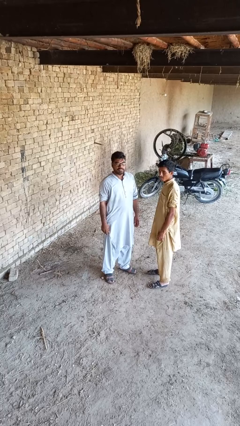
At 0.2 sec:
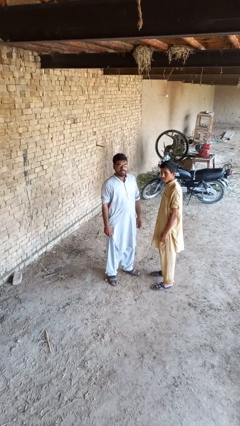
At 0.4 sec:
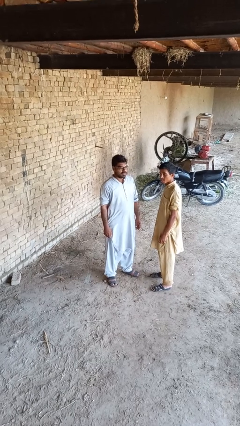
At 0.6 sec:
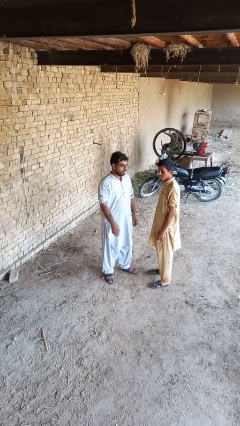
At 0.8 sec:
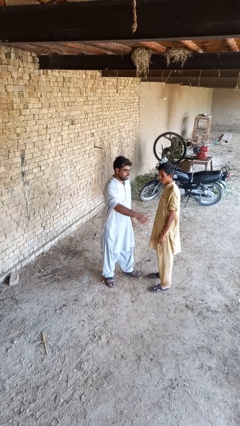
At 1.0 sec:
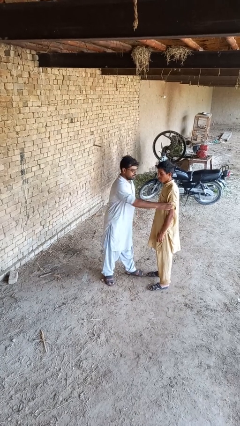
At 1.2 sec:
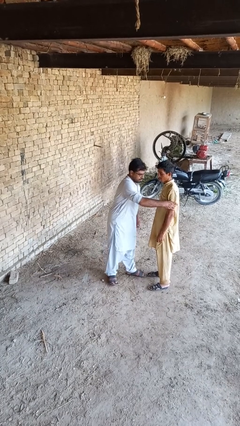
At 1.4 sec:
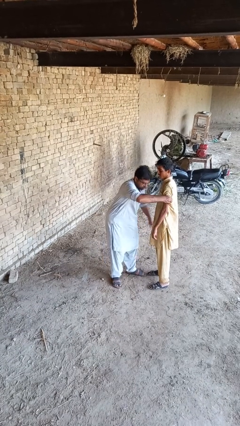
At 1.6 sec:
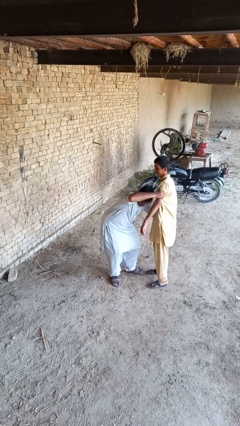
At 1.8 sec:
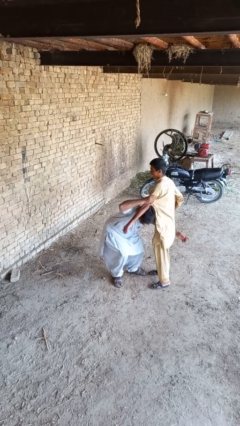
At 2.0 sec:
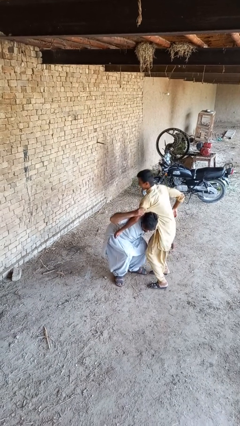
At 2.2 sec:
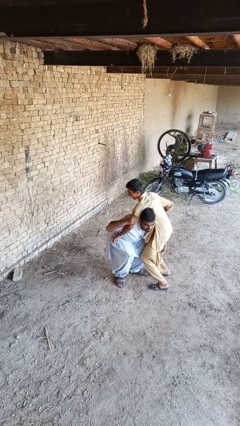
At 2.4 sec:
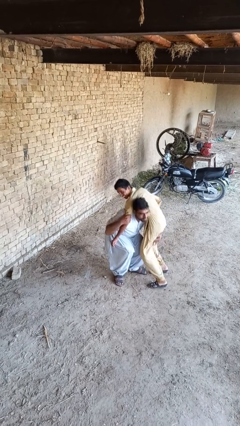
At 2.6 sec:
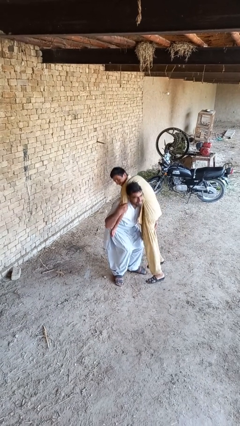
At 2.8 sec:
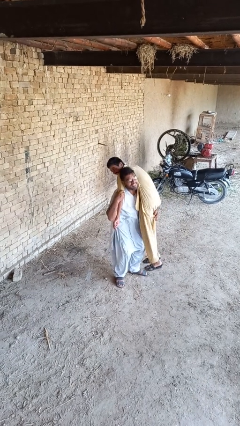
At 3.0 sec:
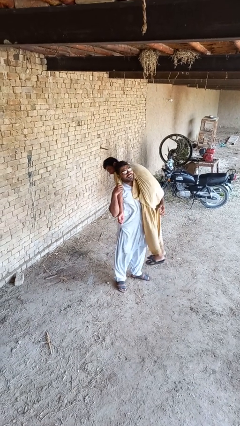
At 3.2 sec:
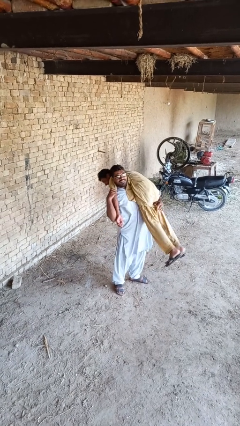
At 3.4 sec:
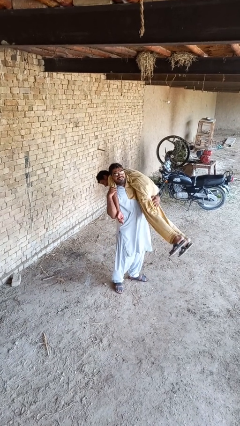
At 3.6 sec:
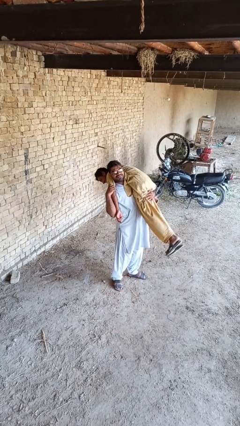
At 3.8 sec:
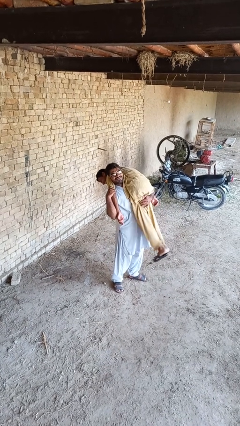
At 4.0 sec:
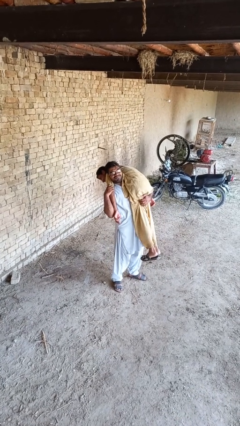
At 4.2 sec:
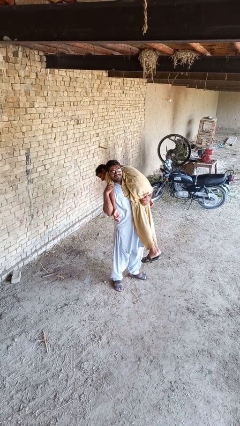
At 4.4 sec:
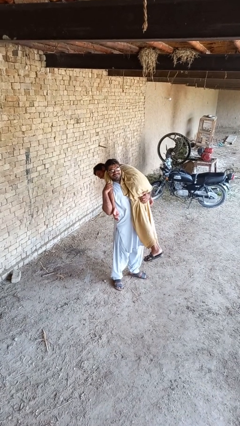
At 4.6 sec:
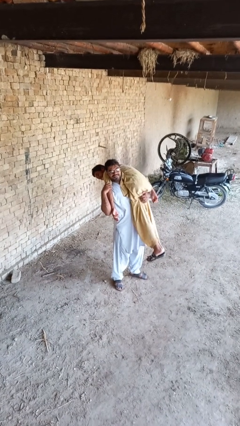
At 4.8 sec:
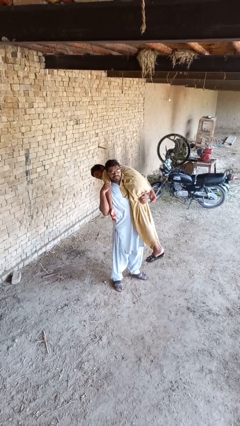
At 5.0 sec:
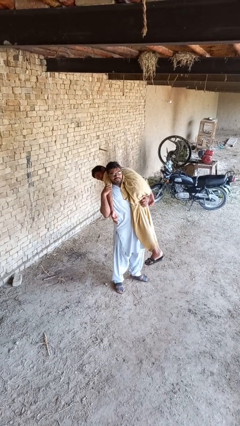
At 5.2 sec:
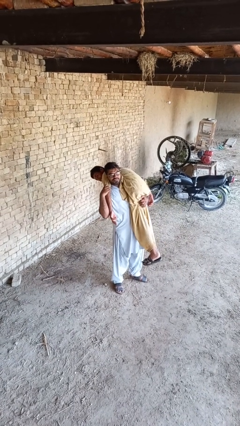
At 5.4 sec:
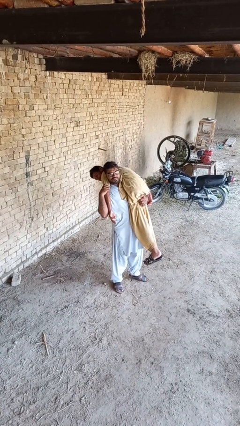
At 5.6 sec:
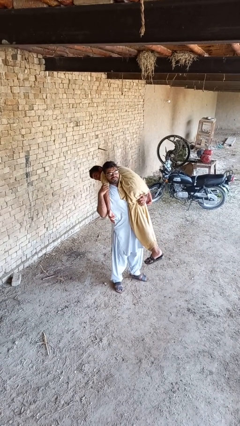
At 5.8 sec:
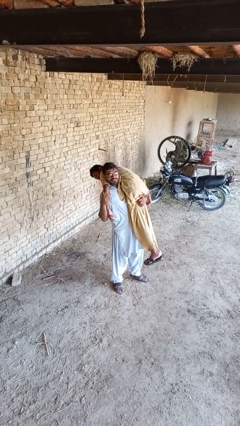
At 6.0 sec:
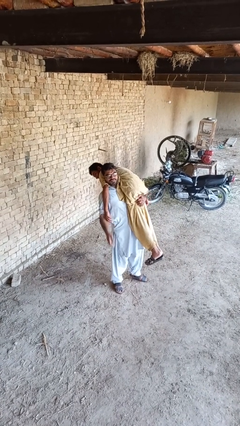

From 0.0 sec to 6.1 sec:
person carries person over shoulder

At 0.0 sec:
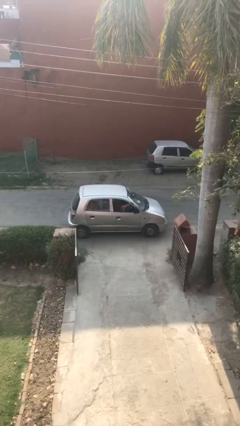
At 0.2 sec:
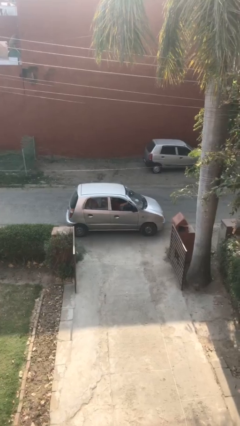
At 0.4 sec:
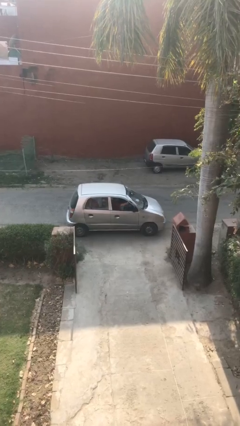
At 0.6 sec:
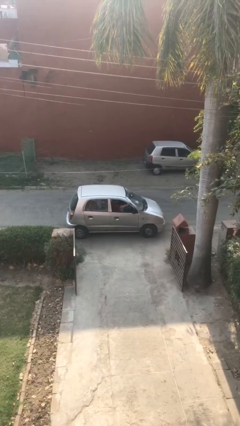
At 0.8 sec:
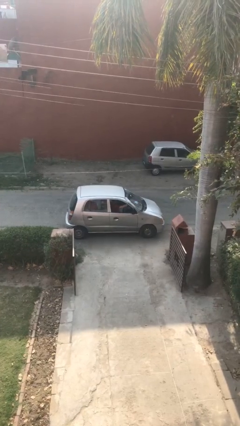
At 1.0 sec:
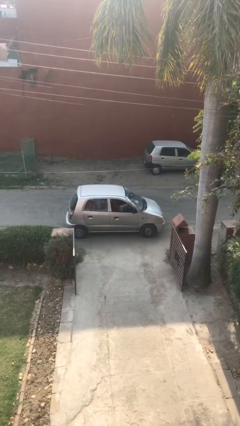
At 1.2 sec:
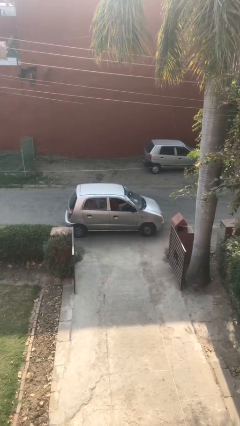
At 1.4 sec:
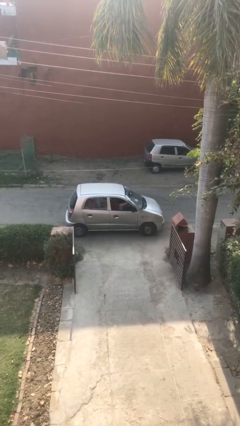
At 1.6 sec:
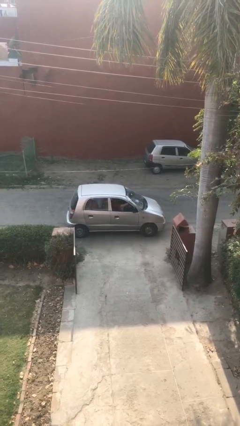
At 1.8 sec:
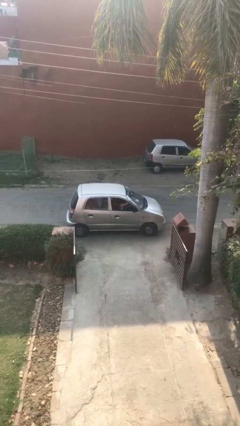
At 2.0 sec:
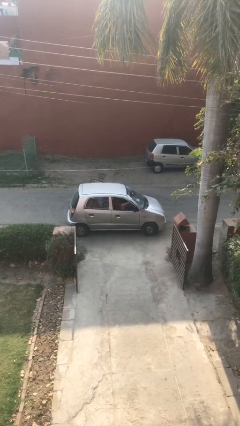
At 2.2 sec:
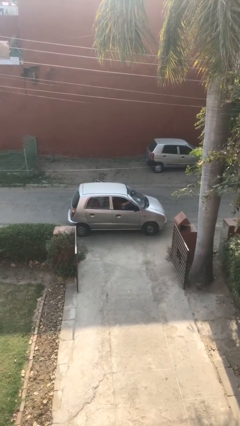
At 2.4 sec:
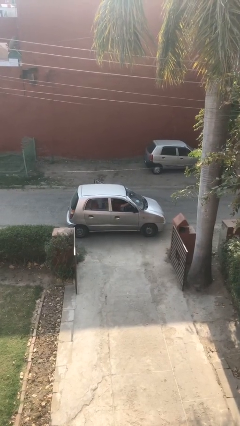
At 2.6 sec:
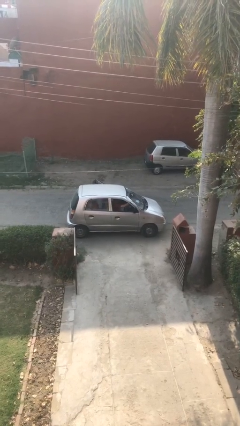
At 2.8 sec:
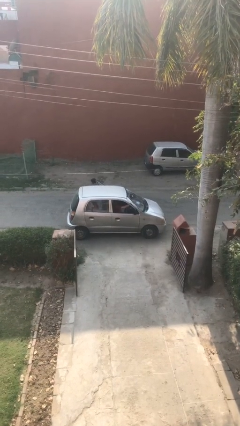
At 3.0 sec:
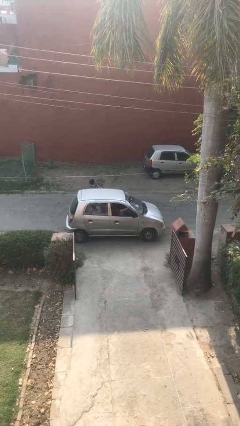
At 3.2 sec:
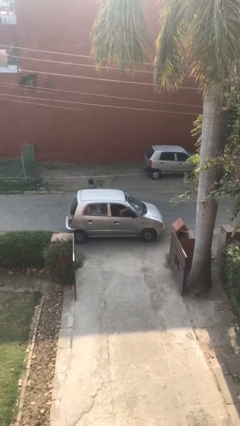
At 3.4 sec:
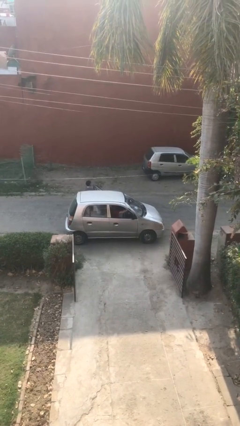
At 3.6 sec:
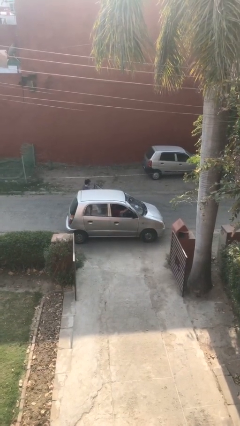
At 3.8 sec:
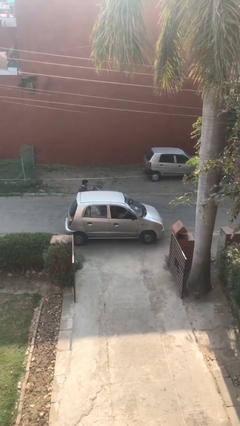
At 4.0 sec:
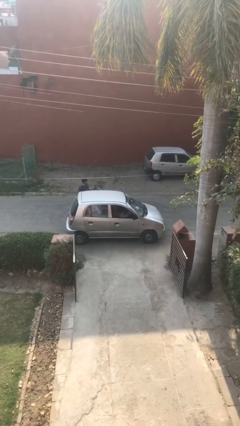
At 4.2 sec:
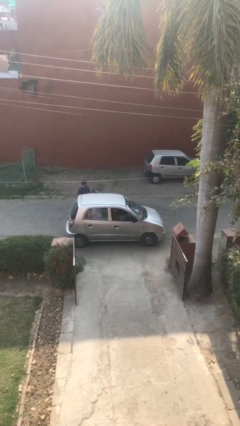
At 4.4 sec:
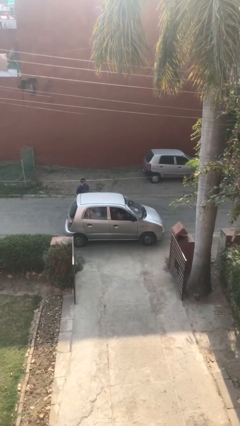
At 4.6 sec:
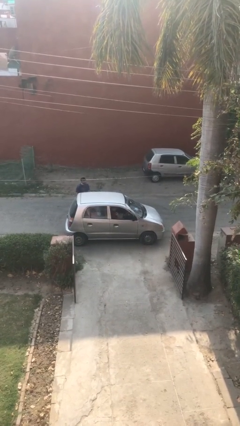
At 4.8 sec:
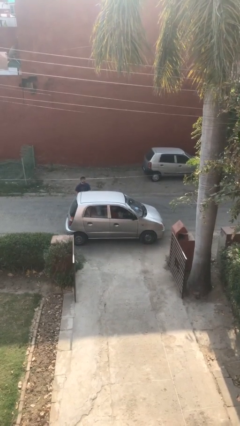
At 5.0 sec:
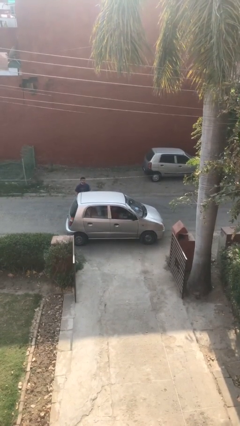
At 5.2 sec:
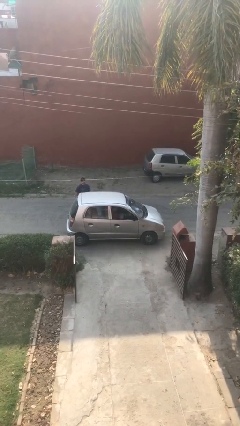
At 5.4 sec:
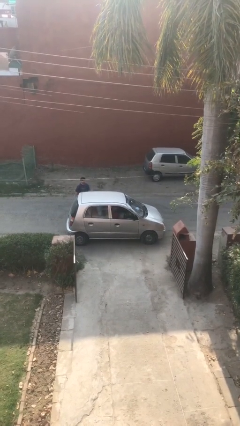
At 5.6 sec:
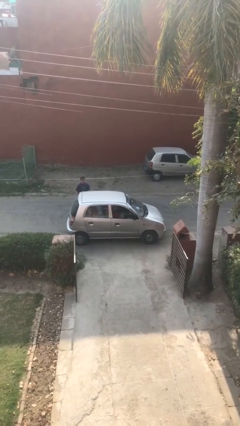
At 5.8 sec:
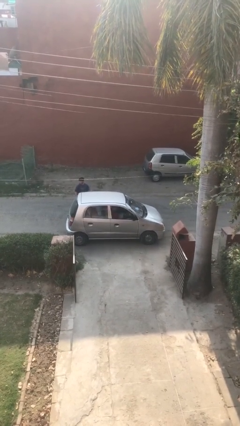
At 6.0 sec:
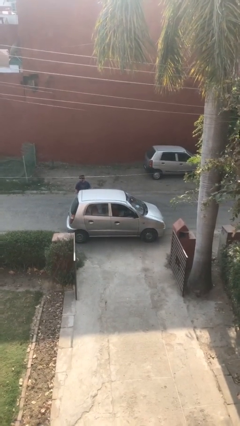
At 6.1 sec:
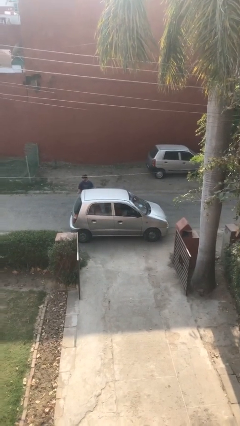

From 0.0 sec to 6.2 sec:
car drops off person

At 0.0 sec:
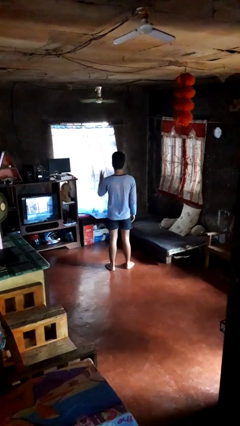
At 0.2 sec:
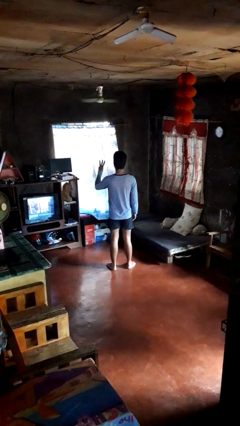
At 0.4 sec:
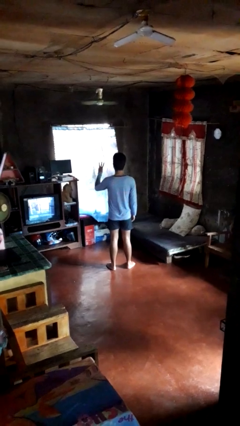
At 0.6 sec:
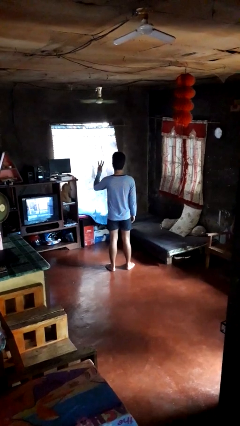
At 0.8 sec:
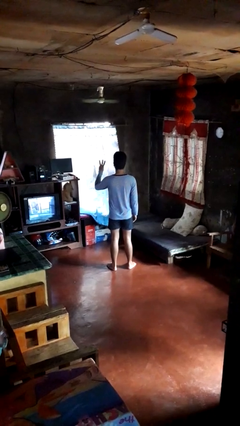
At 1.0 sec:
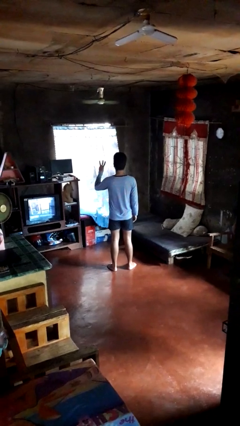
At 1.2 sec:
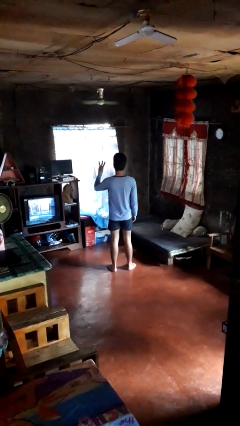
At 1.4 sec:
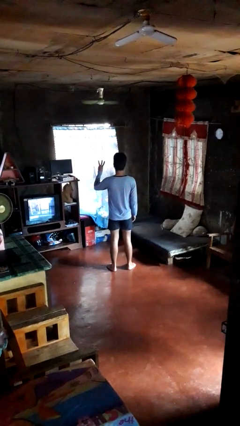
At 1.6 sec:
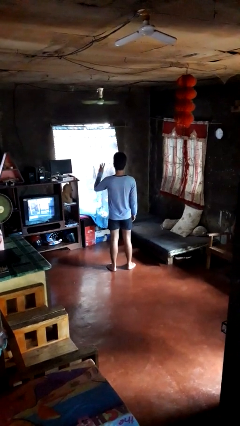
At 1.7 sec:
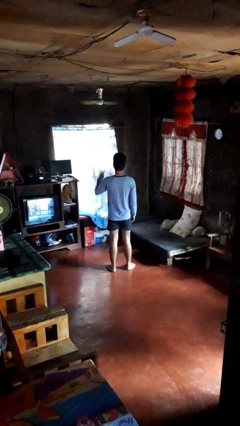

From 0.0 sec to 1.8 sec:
person gestures number three

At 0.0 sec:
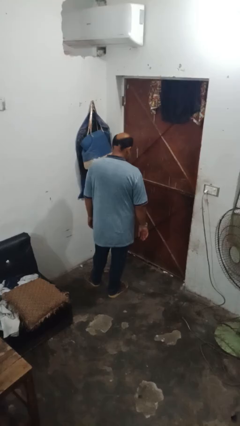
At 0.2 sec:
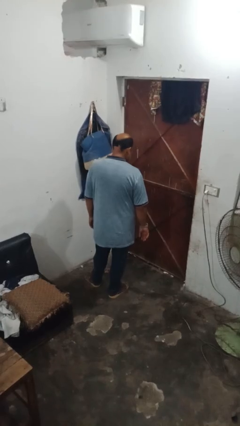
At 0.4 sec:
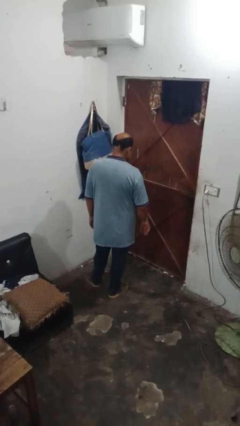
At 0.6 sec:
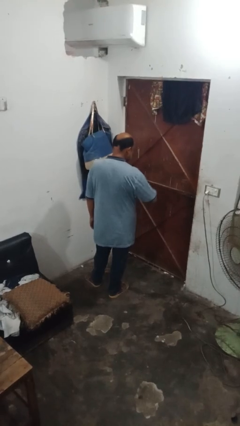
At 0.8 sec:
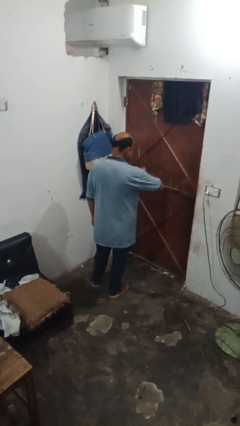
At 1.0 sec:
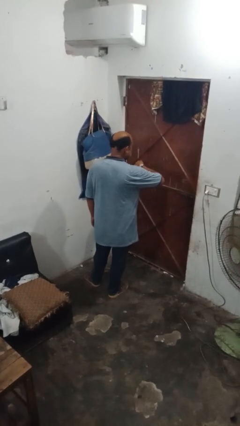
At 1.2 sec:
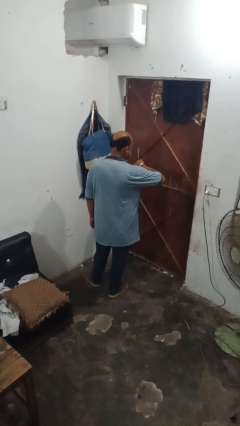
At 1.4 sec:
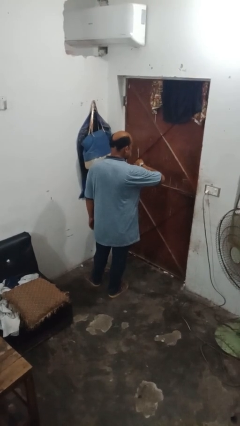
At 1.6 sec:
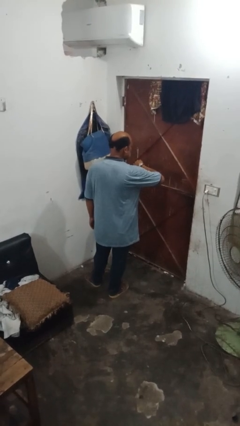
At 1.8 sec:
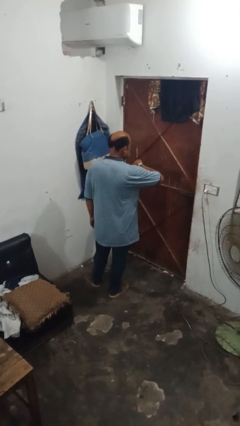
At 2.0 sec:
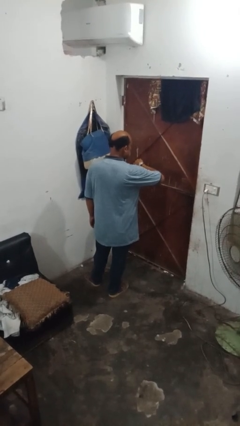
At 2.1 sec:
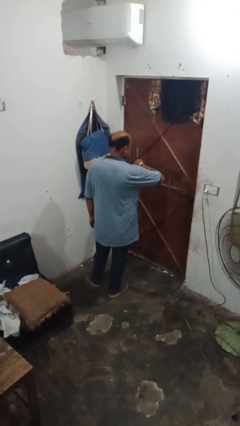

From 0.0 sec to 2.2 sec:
person looks at wristwatch

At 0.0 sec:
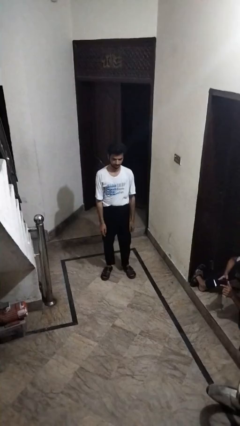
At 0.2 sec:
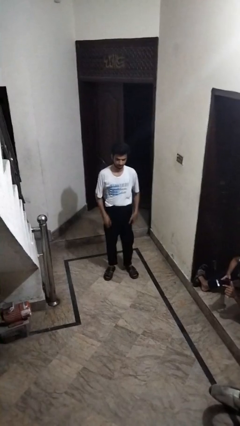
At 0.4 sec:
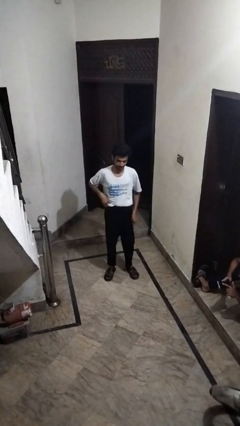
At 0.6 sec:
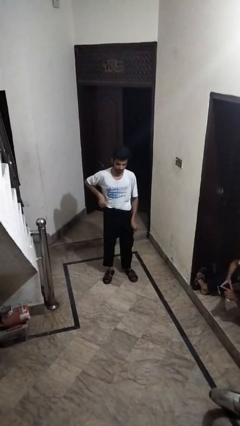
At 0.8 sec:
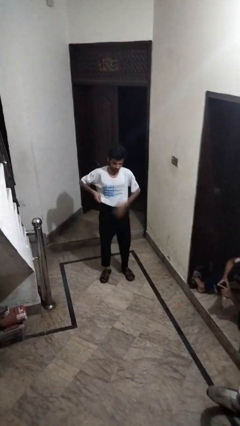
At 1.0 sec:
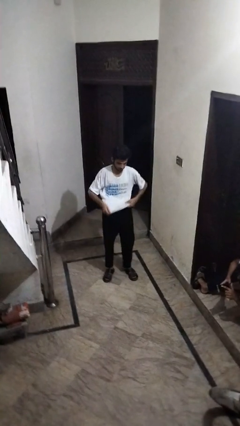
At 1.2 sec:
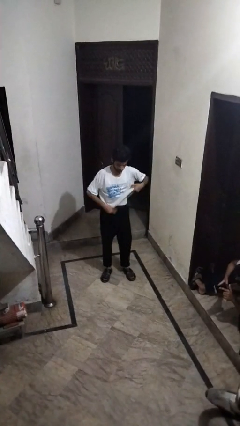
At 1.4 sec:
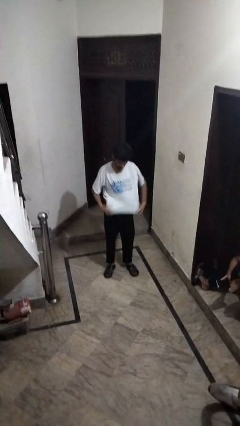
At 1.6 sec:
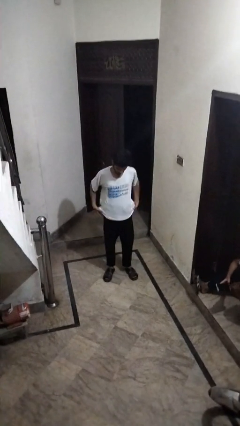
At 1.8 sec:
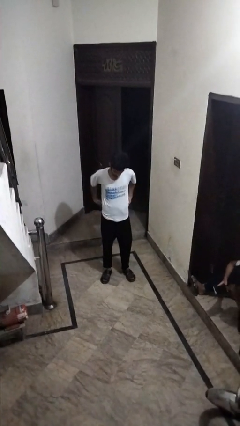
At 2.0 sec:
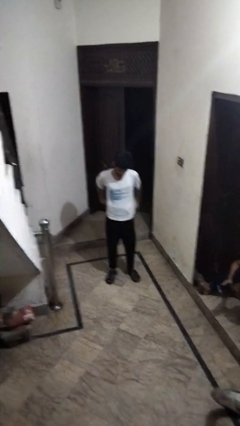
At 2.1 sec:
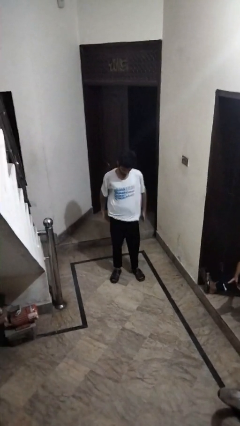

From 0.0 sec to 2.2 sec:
person untucks shirt
